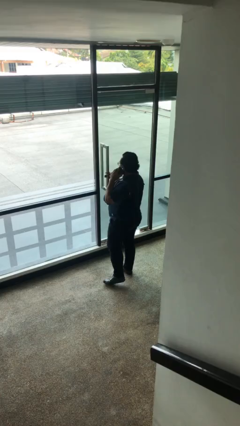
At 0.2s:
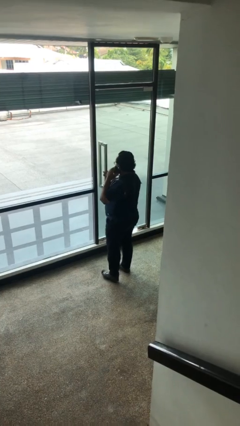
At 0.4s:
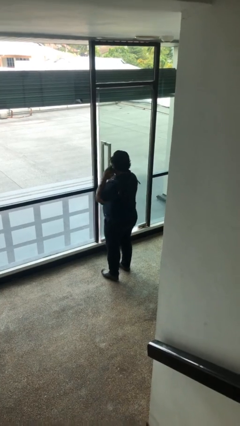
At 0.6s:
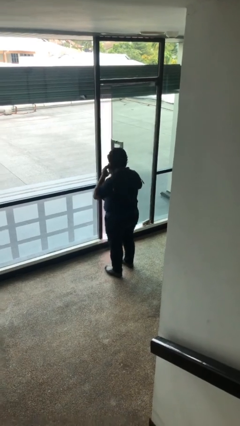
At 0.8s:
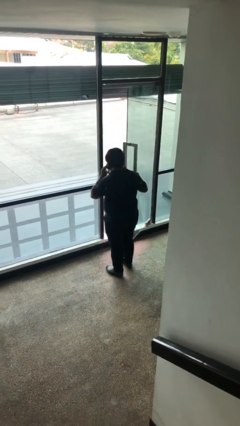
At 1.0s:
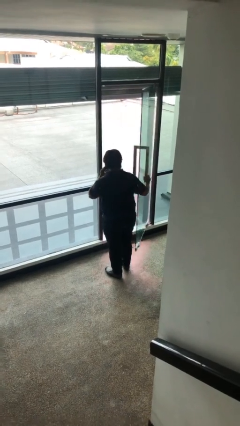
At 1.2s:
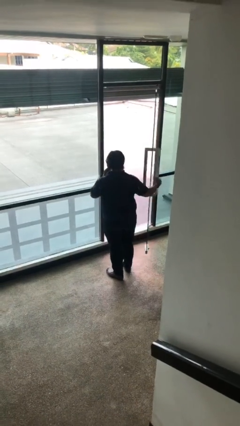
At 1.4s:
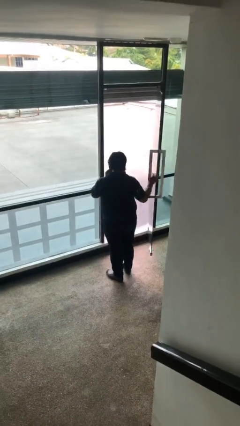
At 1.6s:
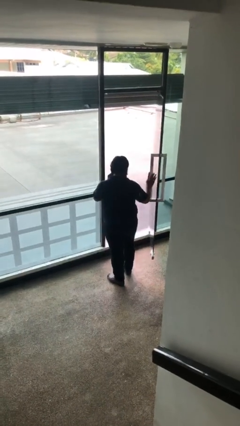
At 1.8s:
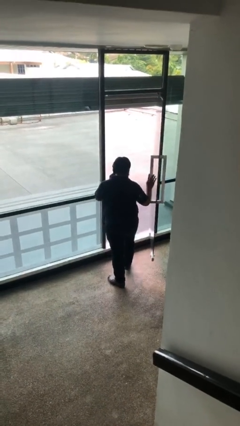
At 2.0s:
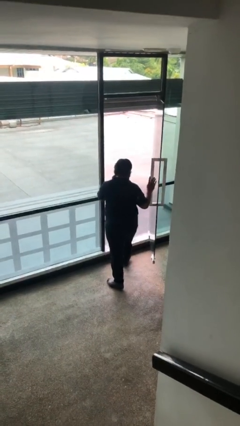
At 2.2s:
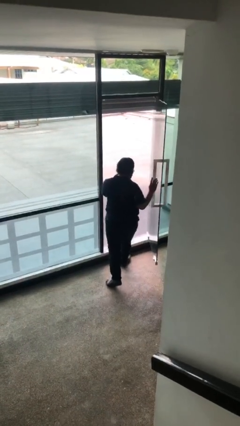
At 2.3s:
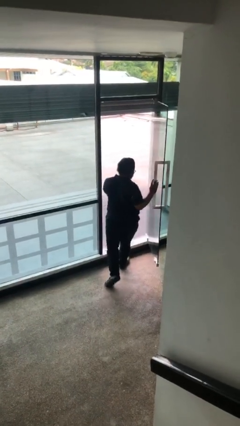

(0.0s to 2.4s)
person opens facility door

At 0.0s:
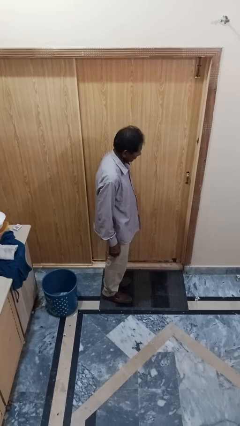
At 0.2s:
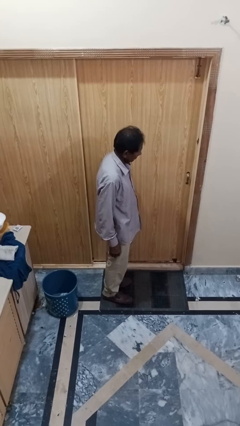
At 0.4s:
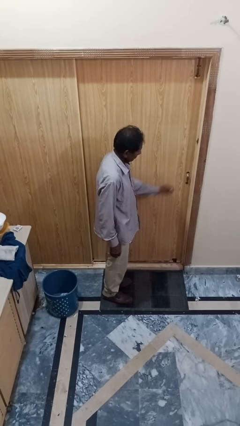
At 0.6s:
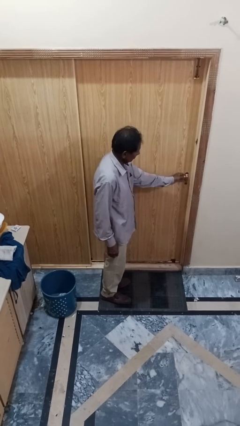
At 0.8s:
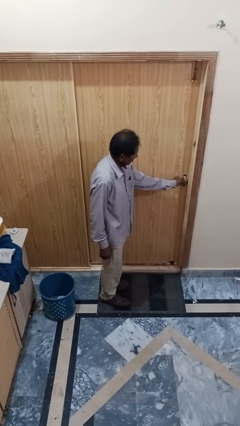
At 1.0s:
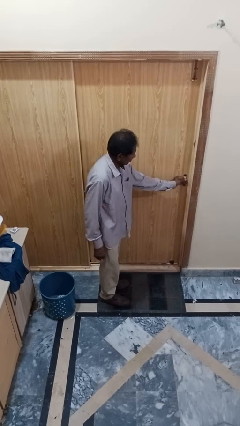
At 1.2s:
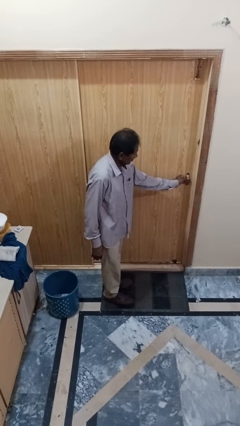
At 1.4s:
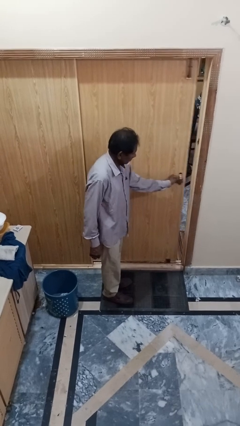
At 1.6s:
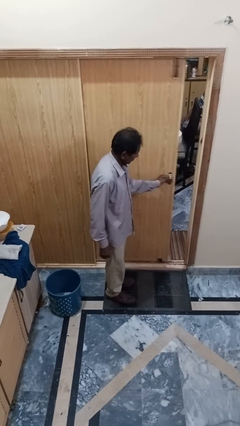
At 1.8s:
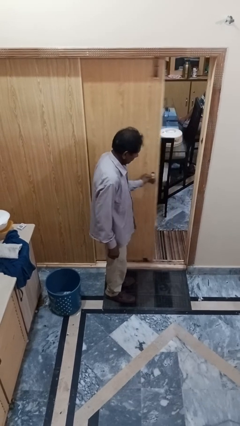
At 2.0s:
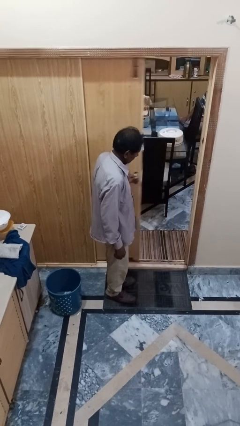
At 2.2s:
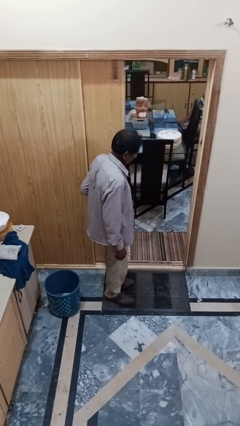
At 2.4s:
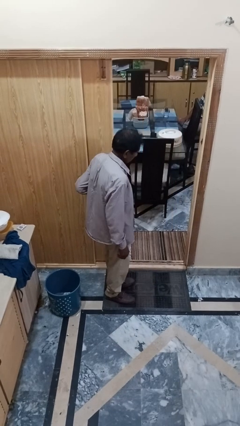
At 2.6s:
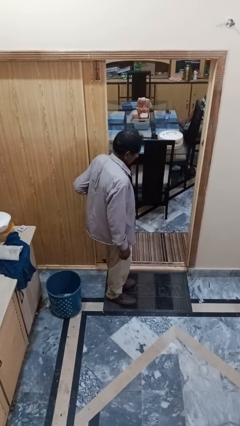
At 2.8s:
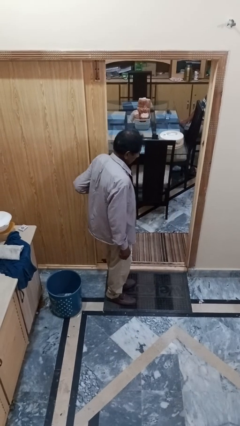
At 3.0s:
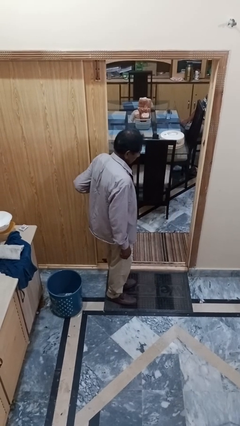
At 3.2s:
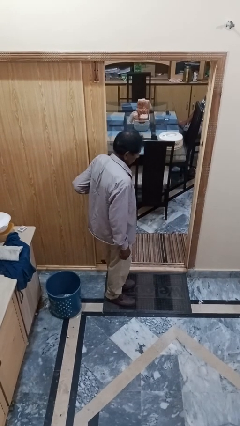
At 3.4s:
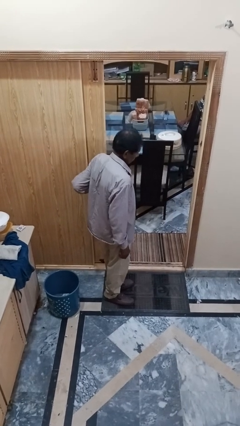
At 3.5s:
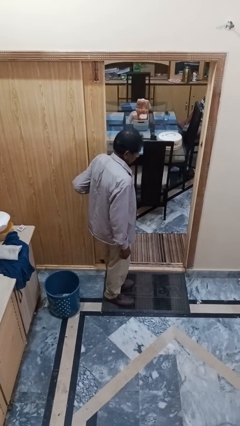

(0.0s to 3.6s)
person opens sliding door

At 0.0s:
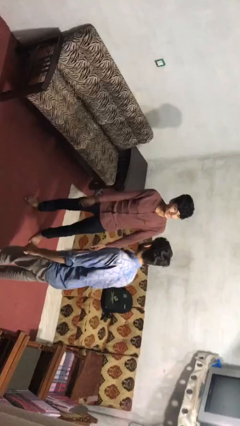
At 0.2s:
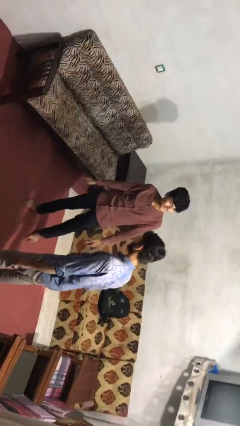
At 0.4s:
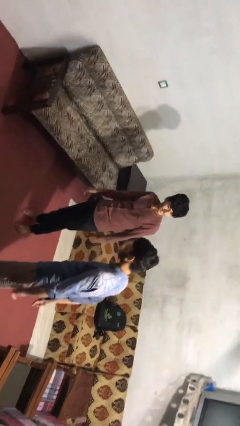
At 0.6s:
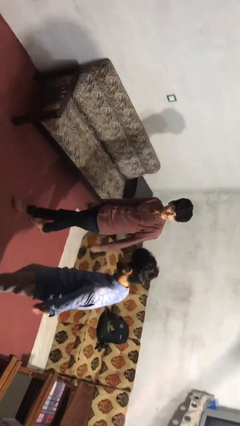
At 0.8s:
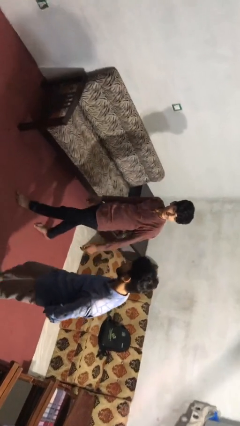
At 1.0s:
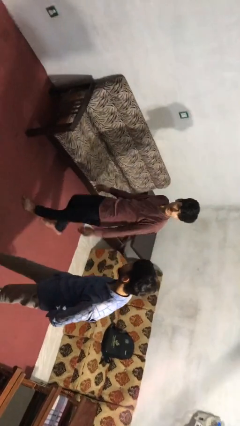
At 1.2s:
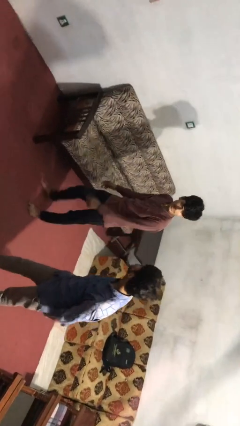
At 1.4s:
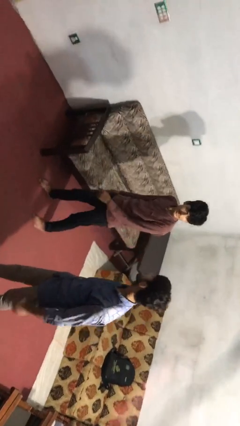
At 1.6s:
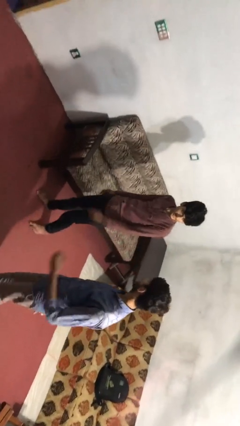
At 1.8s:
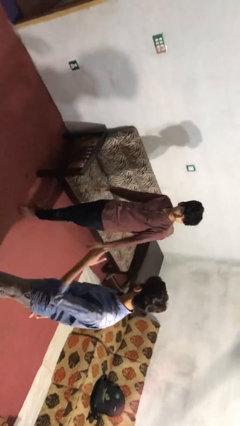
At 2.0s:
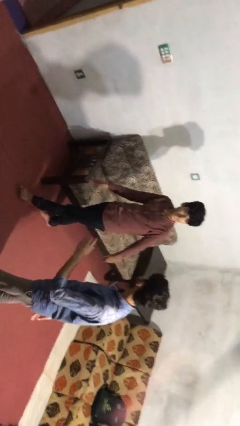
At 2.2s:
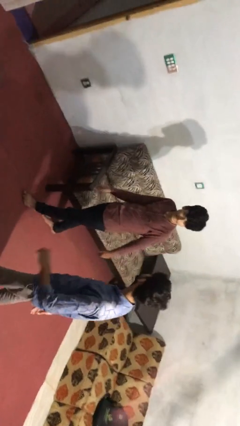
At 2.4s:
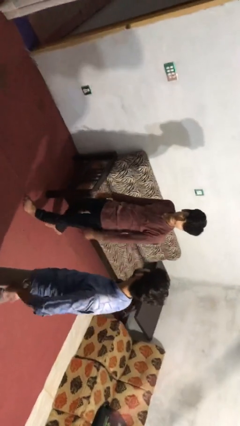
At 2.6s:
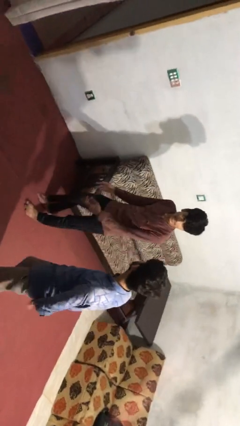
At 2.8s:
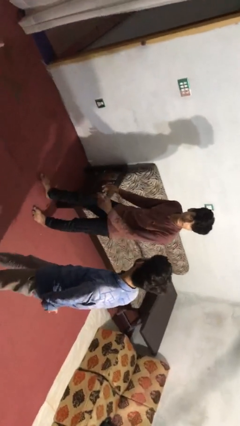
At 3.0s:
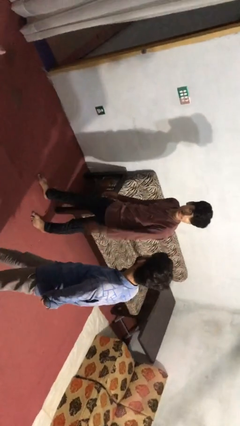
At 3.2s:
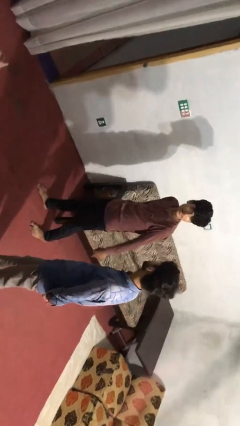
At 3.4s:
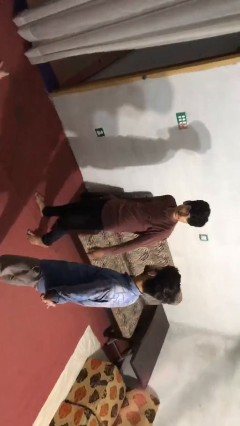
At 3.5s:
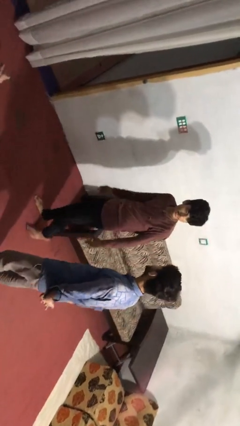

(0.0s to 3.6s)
person talks to person

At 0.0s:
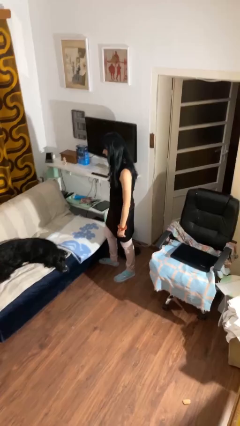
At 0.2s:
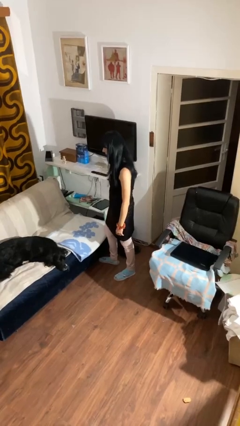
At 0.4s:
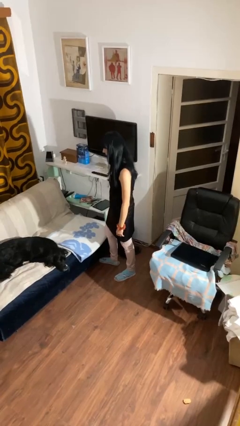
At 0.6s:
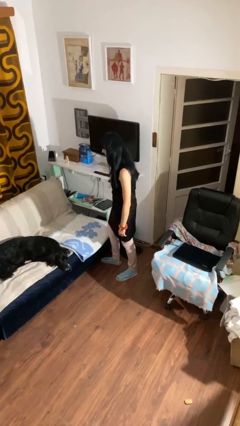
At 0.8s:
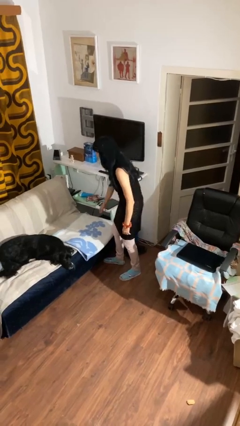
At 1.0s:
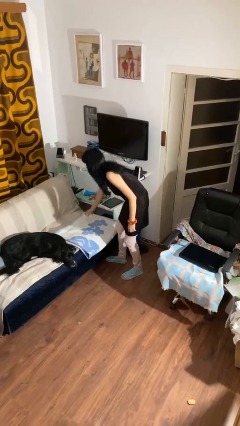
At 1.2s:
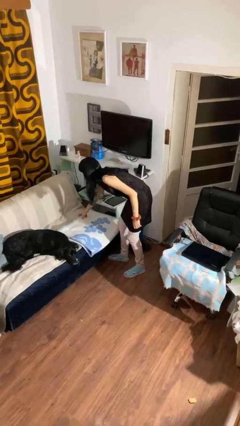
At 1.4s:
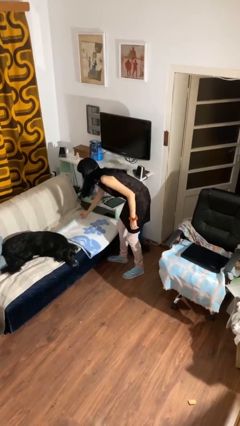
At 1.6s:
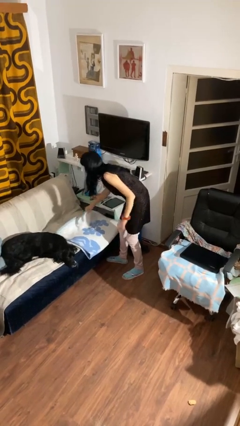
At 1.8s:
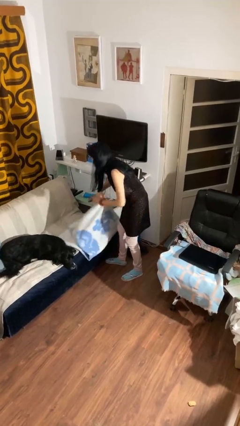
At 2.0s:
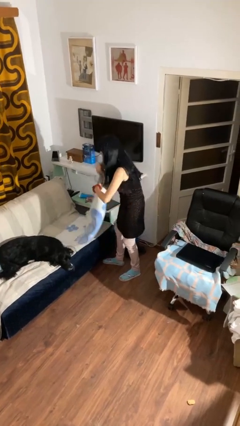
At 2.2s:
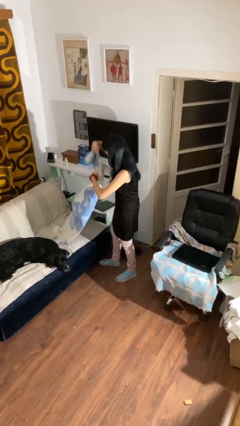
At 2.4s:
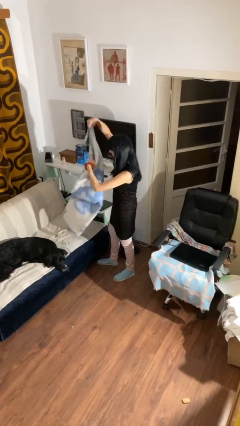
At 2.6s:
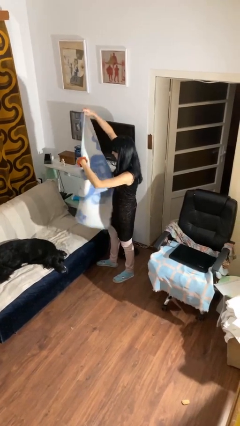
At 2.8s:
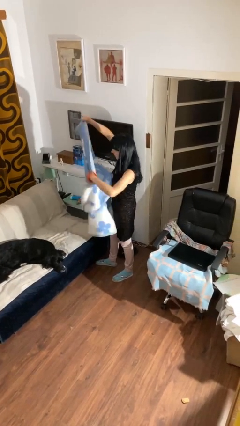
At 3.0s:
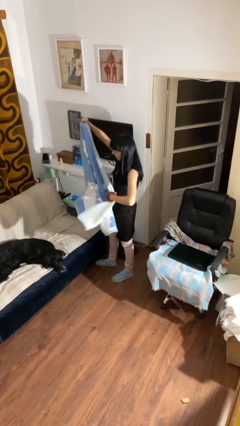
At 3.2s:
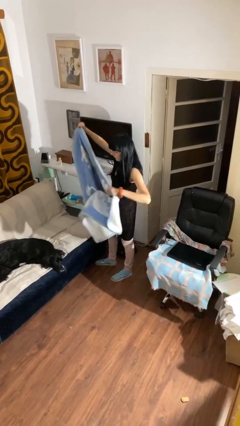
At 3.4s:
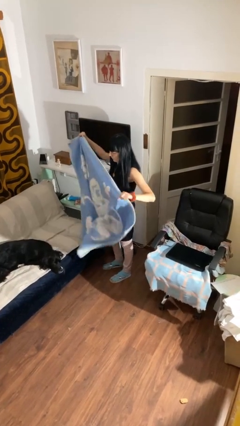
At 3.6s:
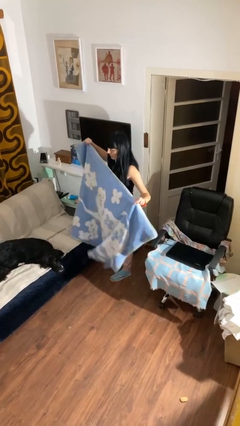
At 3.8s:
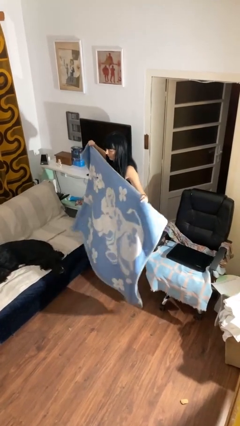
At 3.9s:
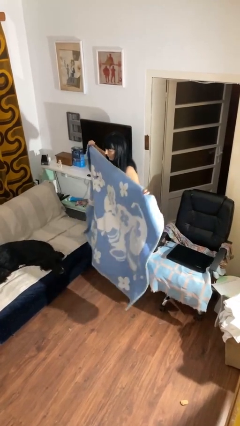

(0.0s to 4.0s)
person unfolds blanket

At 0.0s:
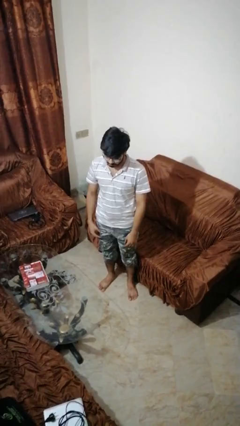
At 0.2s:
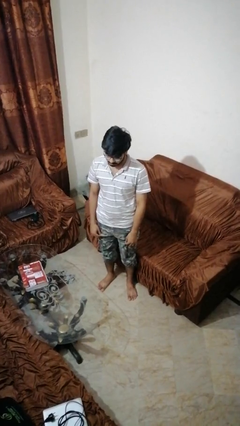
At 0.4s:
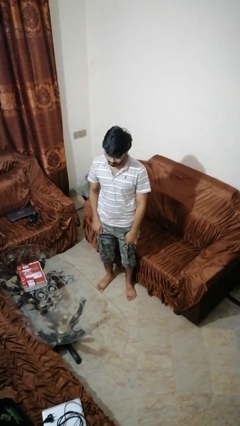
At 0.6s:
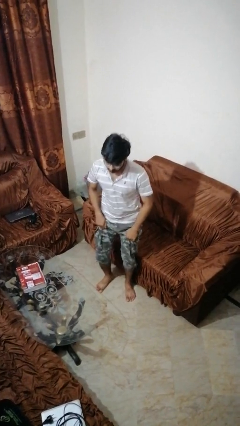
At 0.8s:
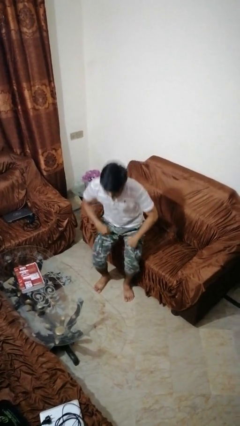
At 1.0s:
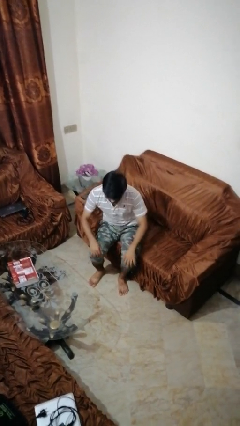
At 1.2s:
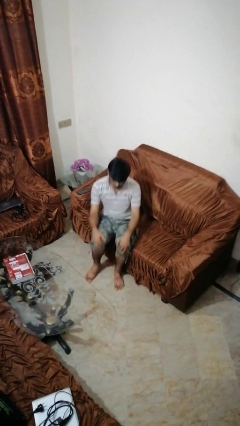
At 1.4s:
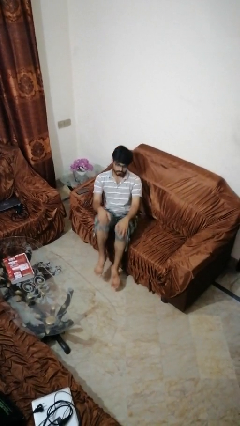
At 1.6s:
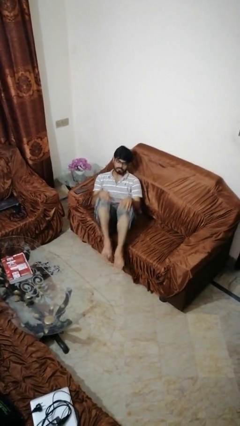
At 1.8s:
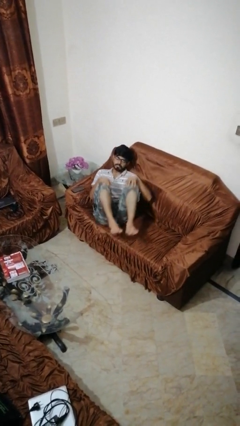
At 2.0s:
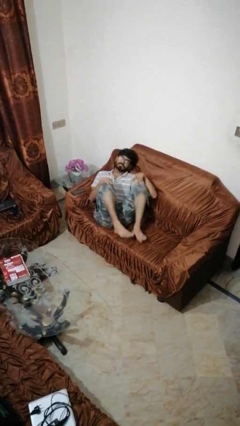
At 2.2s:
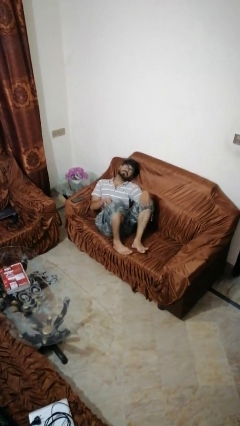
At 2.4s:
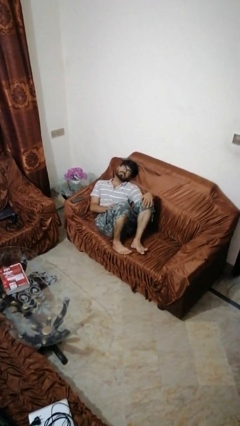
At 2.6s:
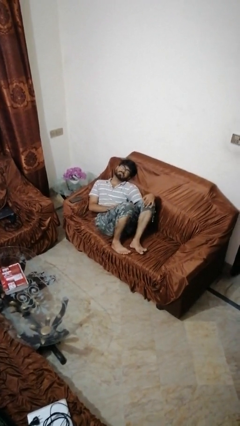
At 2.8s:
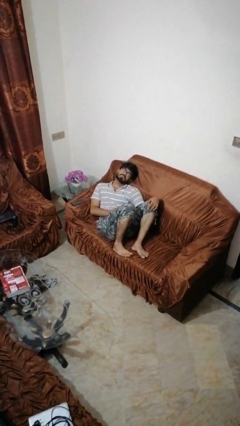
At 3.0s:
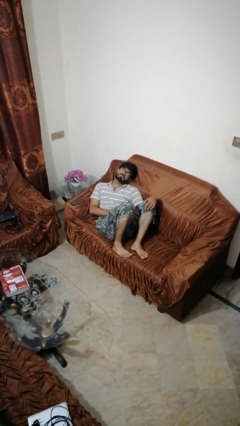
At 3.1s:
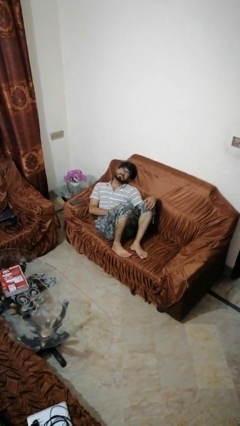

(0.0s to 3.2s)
person lies down on couch

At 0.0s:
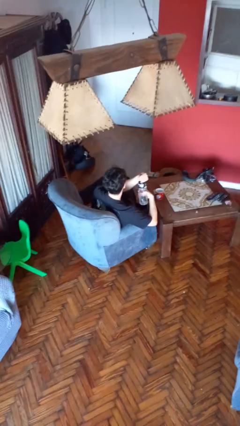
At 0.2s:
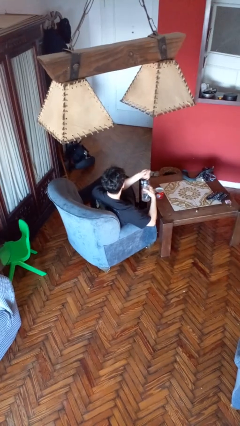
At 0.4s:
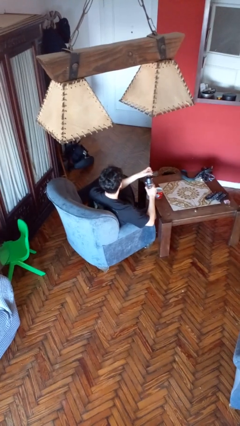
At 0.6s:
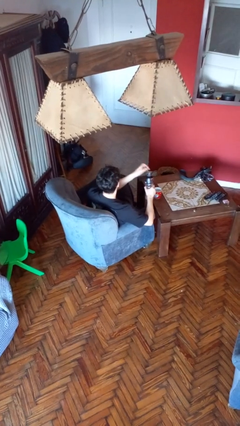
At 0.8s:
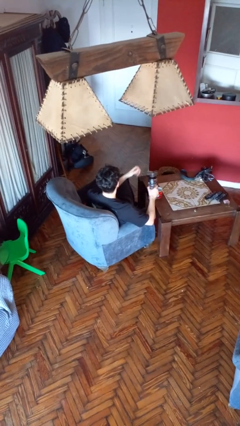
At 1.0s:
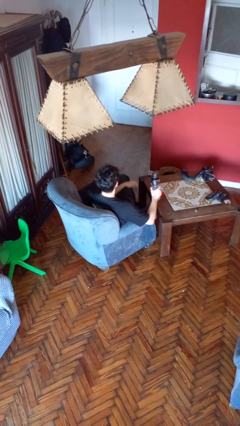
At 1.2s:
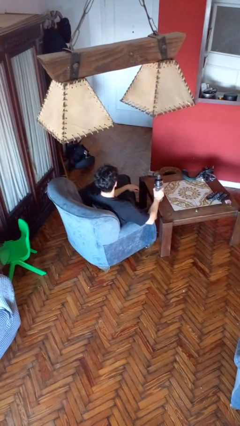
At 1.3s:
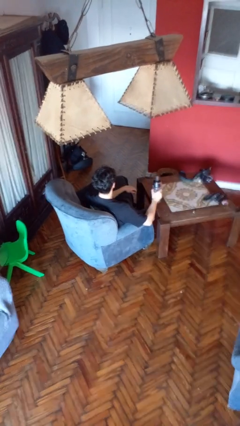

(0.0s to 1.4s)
person unscrews lid from bottle
